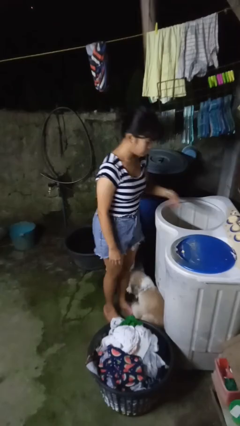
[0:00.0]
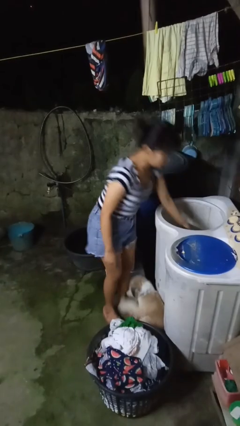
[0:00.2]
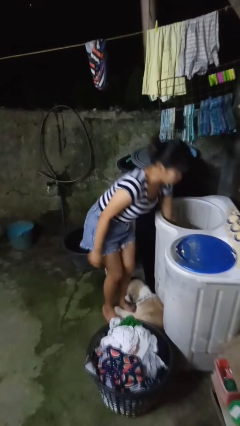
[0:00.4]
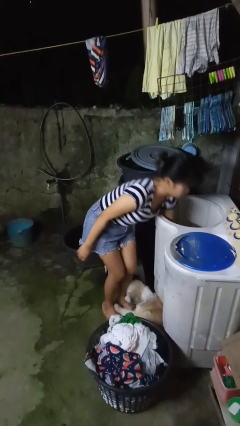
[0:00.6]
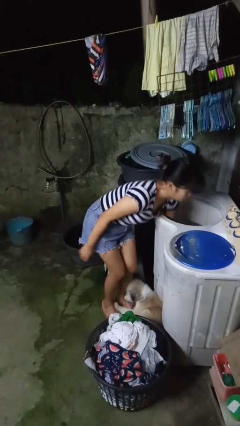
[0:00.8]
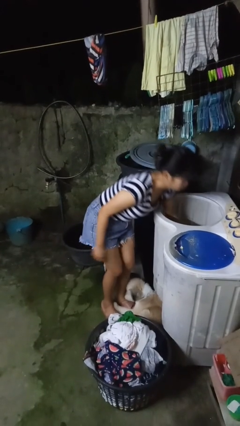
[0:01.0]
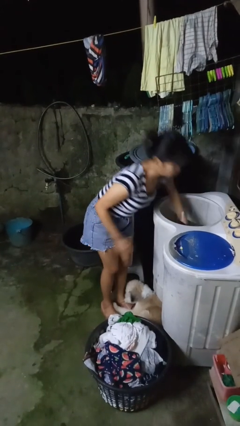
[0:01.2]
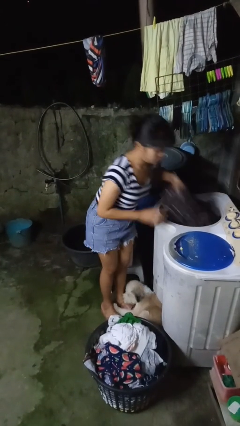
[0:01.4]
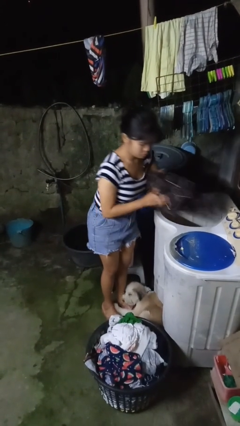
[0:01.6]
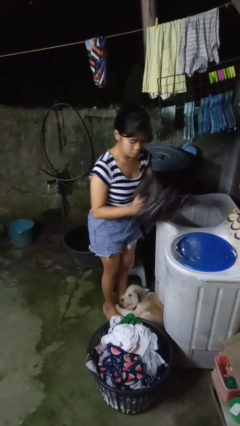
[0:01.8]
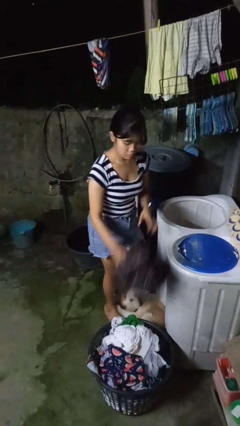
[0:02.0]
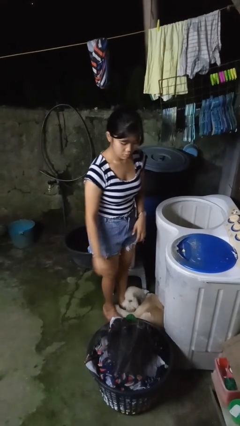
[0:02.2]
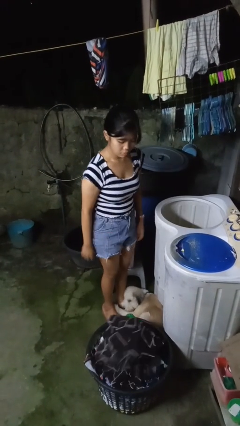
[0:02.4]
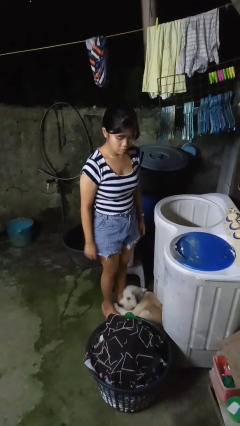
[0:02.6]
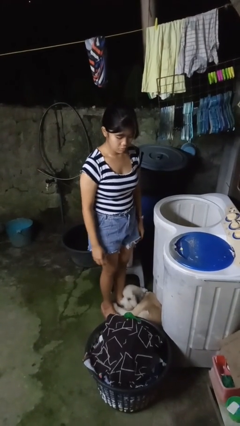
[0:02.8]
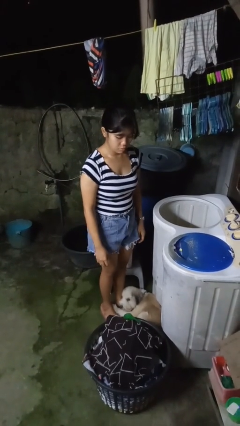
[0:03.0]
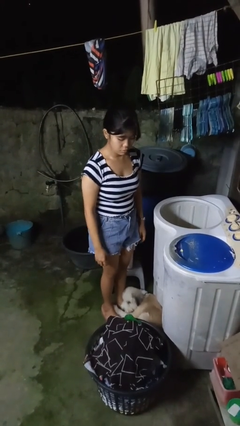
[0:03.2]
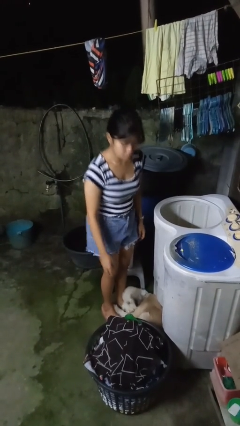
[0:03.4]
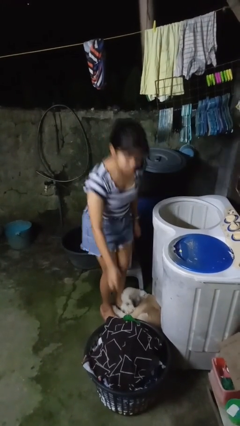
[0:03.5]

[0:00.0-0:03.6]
person unloads clotheswasher

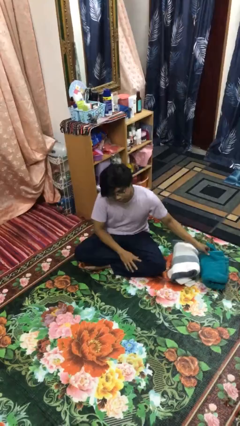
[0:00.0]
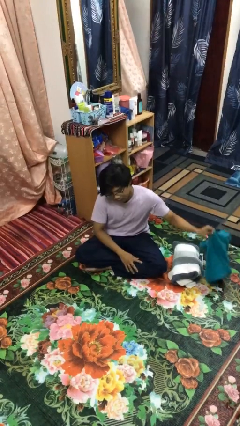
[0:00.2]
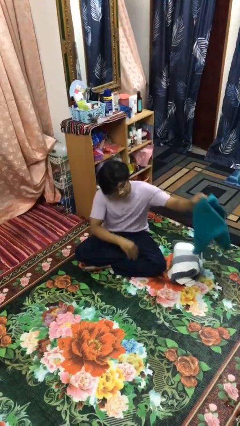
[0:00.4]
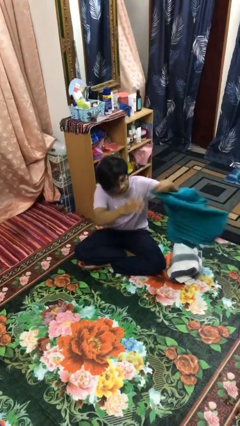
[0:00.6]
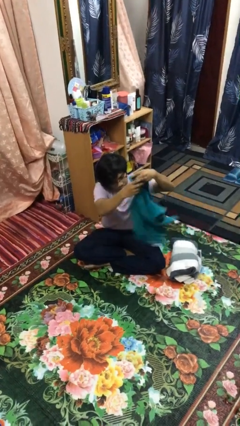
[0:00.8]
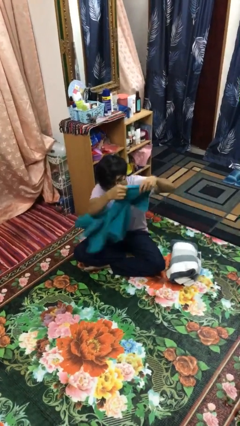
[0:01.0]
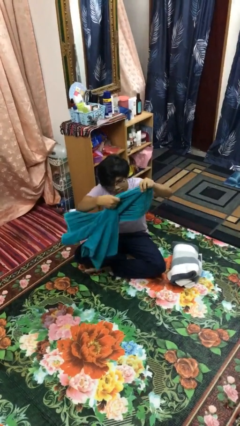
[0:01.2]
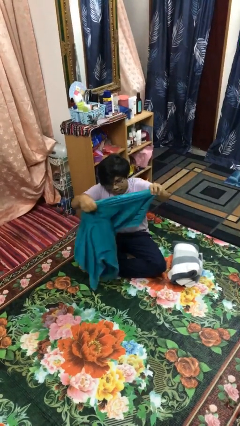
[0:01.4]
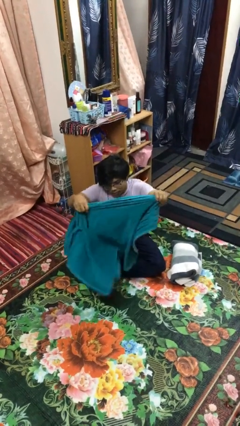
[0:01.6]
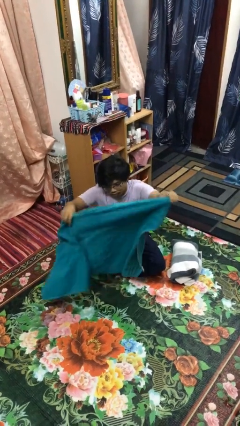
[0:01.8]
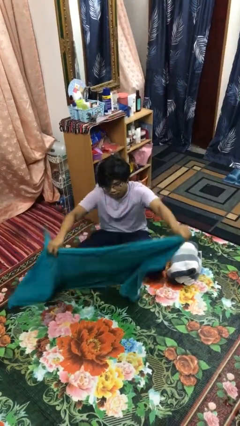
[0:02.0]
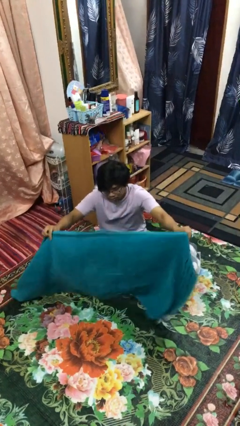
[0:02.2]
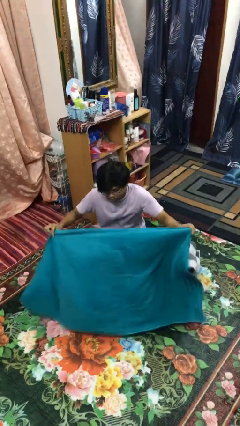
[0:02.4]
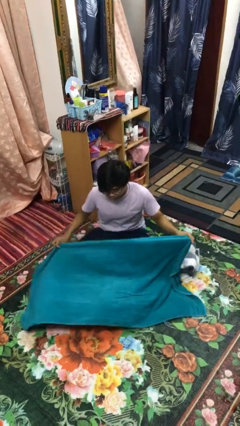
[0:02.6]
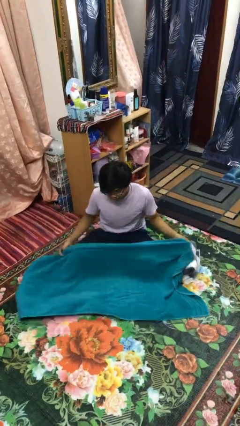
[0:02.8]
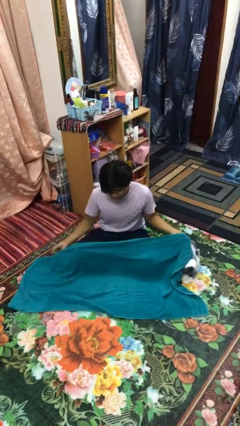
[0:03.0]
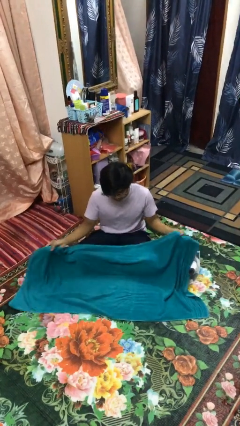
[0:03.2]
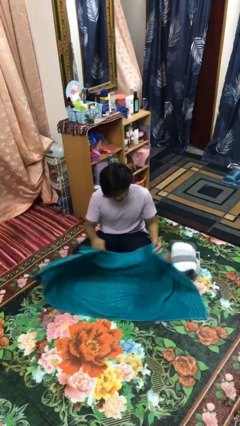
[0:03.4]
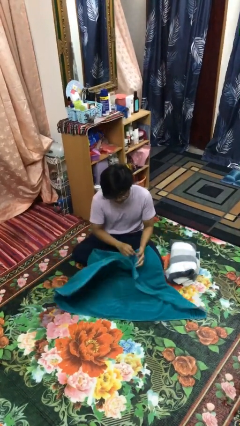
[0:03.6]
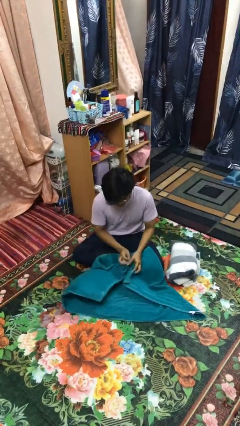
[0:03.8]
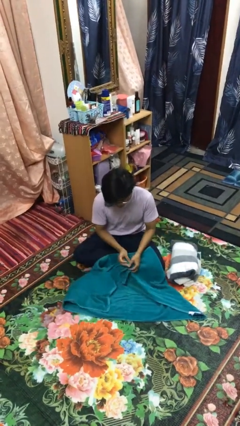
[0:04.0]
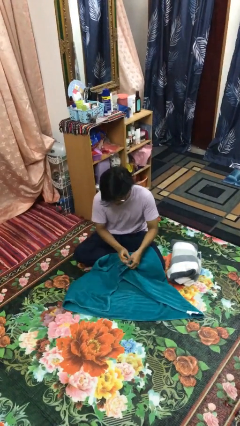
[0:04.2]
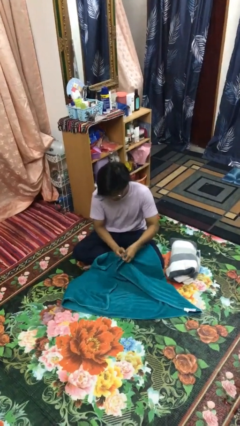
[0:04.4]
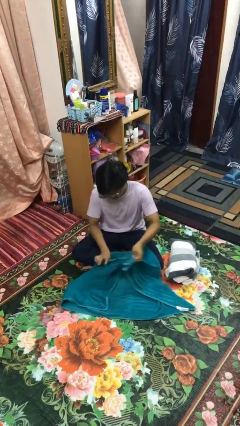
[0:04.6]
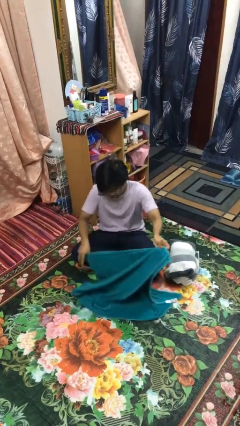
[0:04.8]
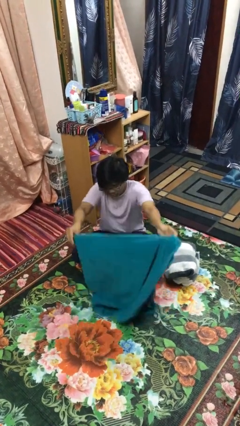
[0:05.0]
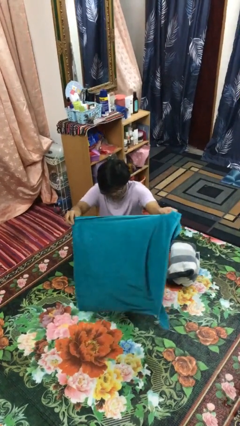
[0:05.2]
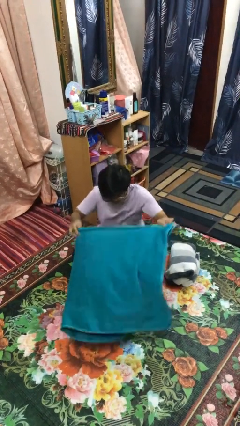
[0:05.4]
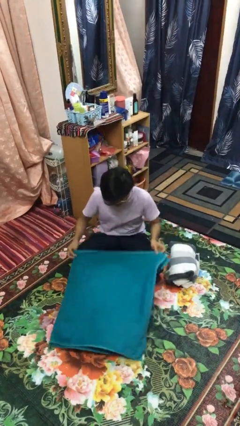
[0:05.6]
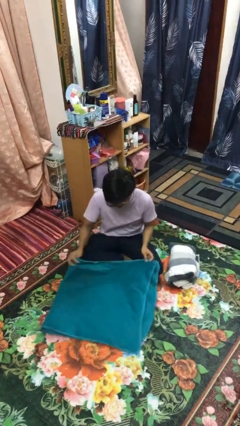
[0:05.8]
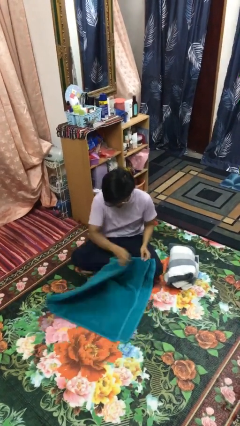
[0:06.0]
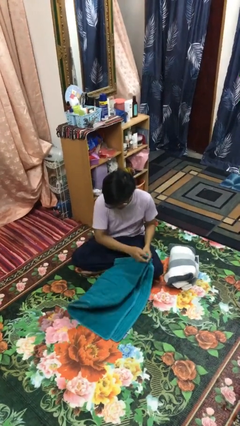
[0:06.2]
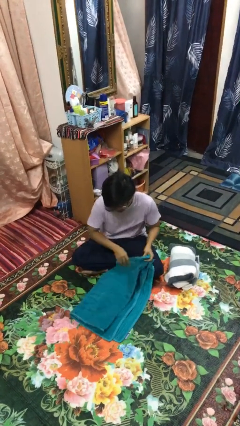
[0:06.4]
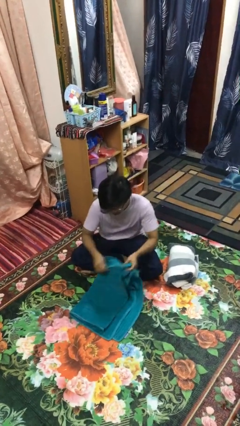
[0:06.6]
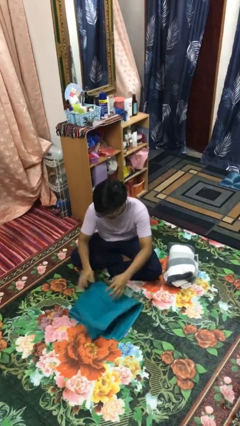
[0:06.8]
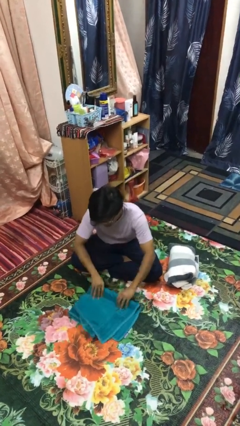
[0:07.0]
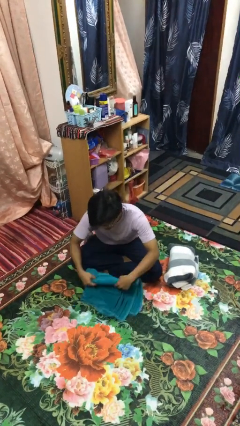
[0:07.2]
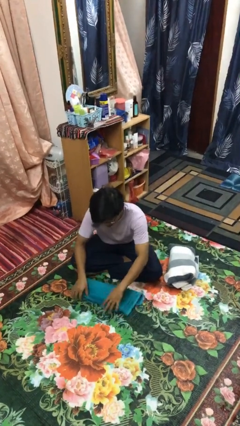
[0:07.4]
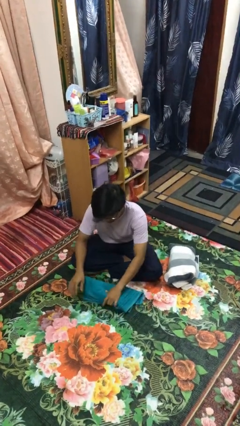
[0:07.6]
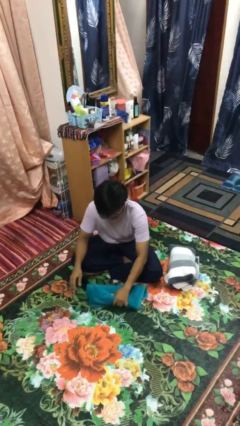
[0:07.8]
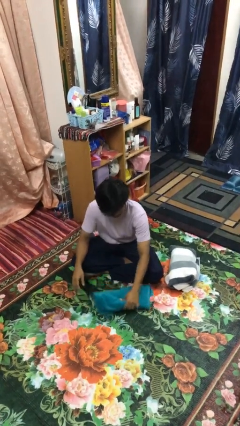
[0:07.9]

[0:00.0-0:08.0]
person folds towel

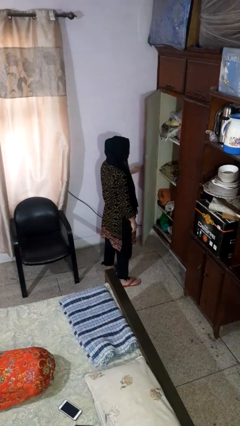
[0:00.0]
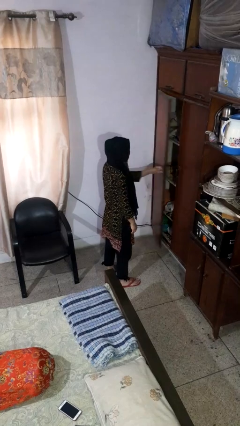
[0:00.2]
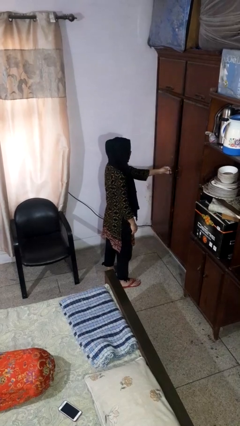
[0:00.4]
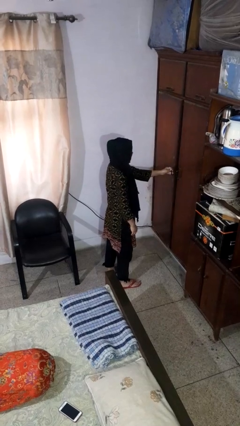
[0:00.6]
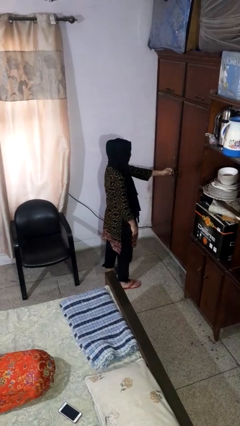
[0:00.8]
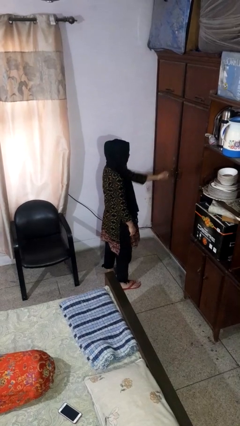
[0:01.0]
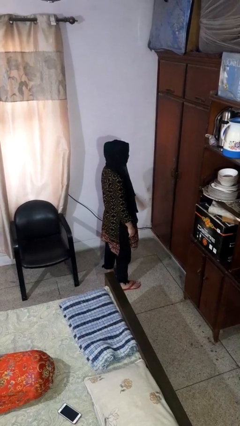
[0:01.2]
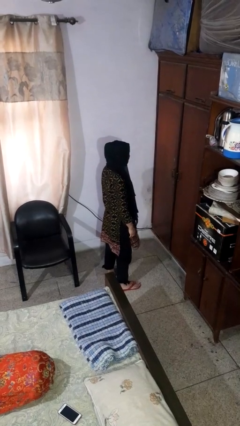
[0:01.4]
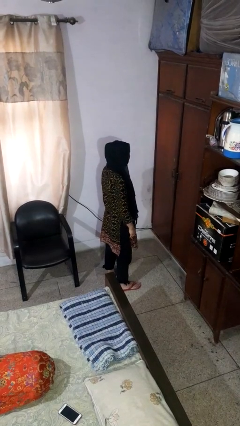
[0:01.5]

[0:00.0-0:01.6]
person closes closet door

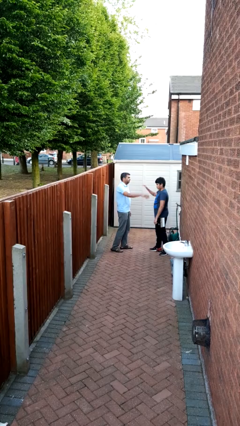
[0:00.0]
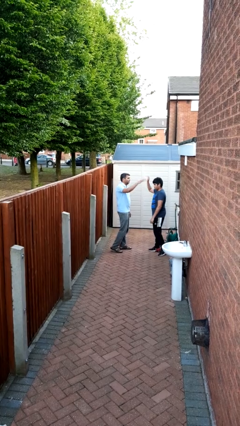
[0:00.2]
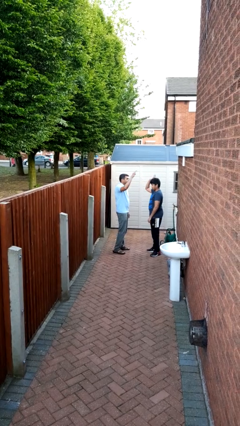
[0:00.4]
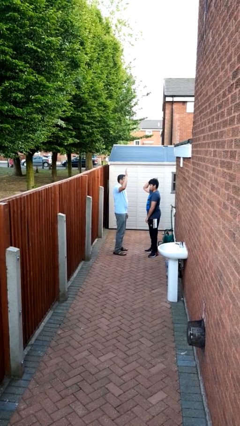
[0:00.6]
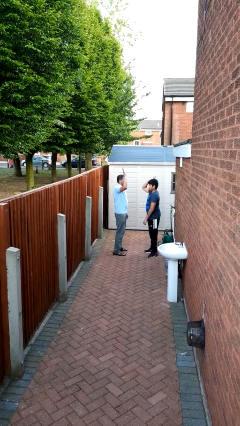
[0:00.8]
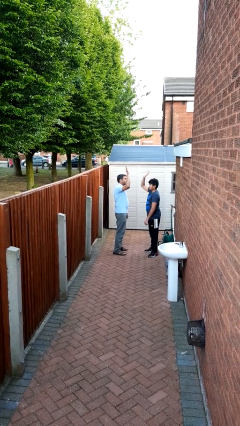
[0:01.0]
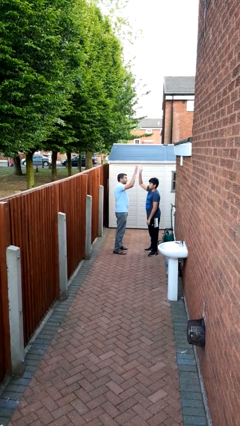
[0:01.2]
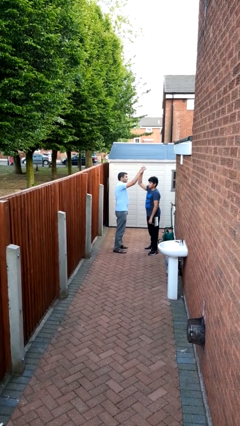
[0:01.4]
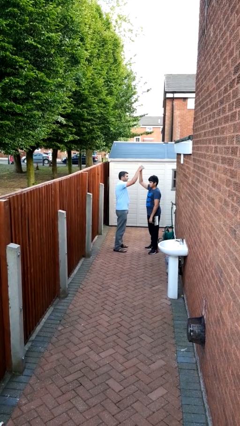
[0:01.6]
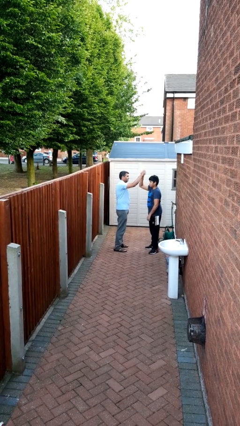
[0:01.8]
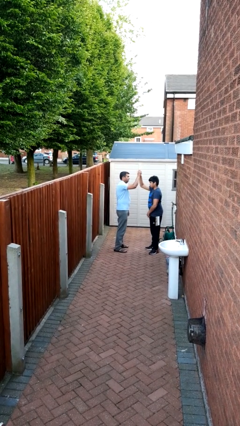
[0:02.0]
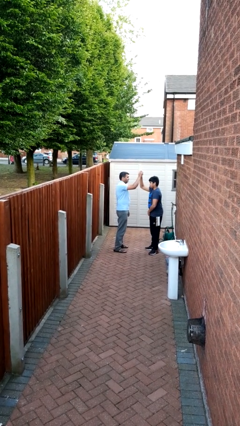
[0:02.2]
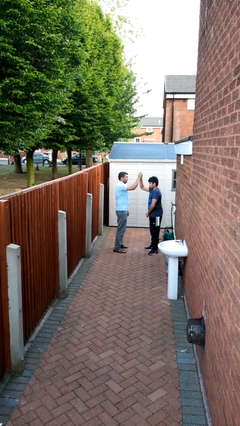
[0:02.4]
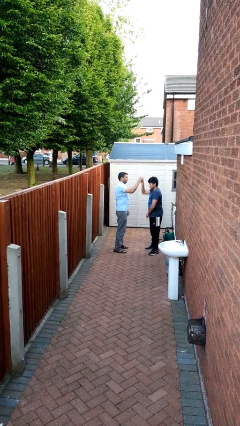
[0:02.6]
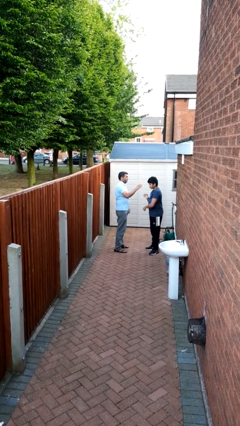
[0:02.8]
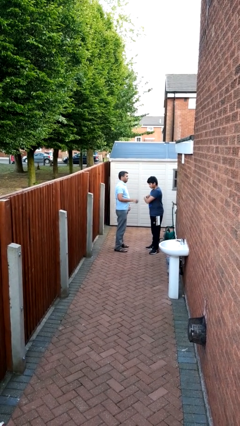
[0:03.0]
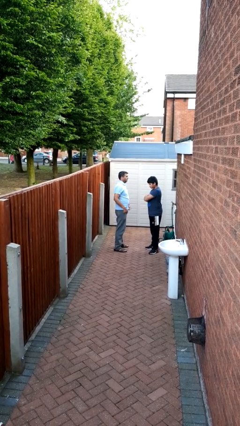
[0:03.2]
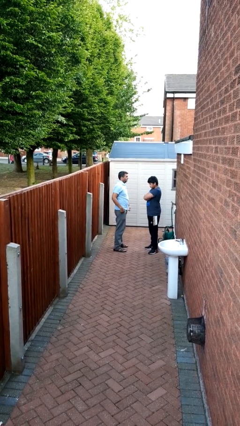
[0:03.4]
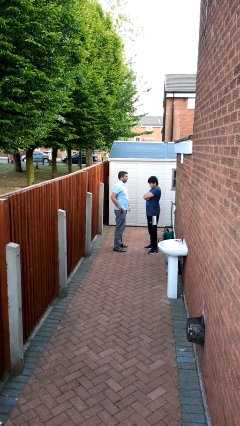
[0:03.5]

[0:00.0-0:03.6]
person highfives hand

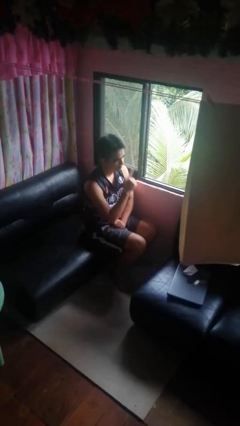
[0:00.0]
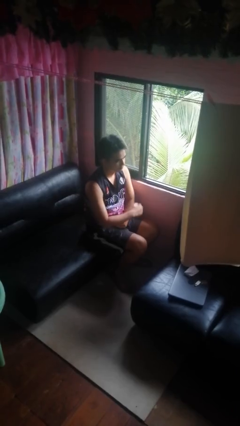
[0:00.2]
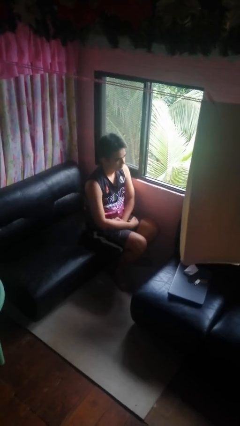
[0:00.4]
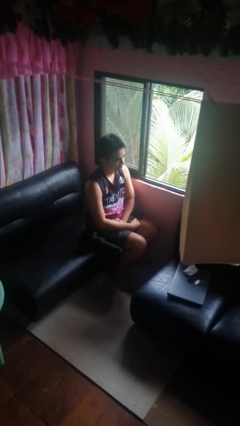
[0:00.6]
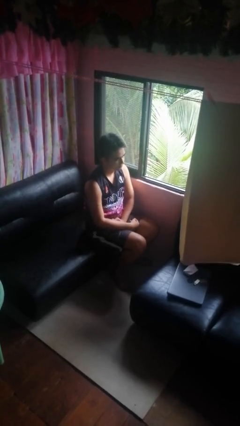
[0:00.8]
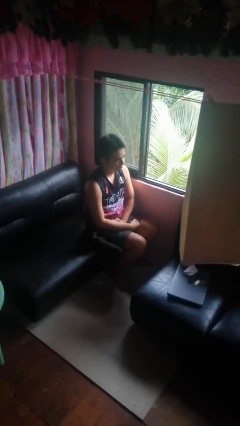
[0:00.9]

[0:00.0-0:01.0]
person gestures be quiet
